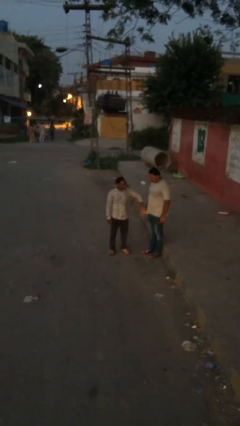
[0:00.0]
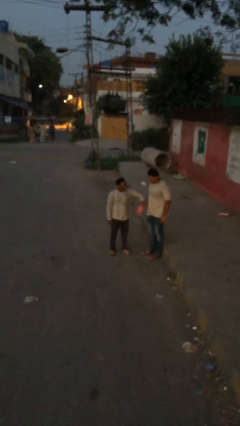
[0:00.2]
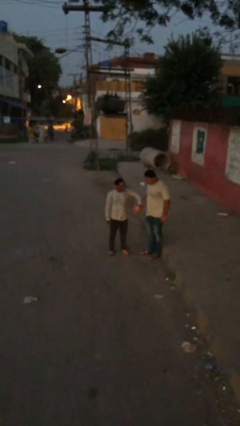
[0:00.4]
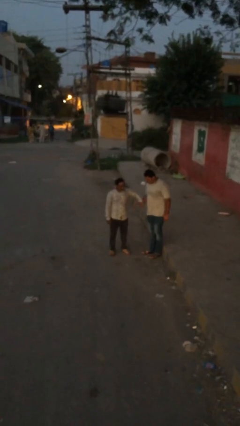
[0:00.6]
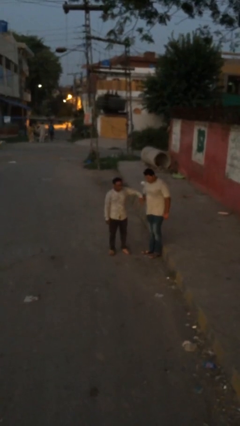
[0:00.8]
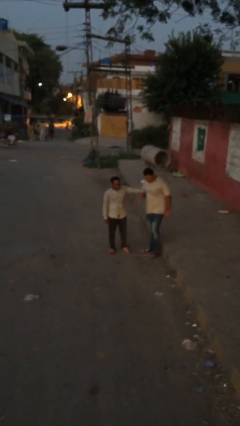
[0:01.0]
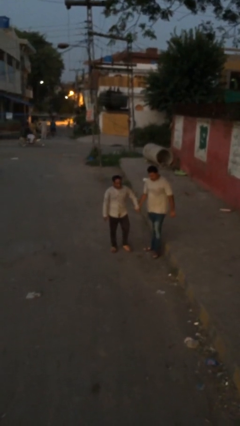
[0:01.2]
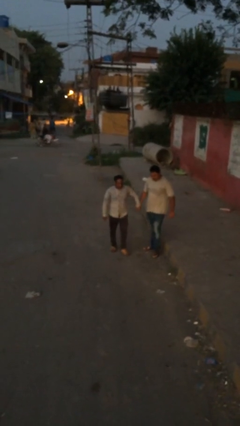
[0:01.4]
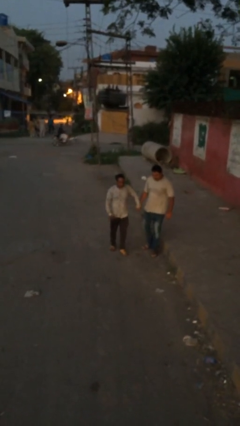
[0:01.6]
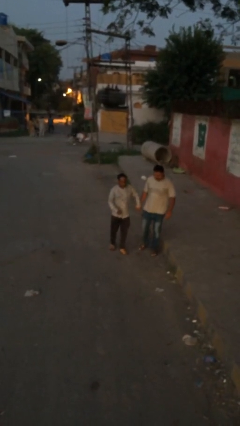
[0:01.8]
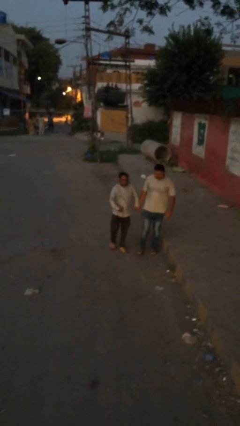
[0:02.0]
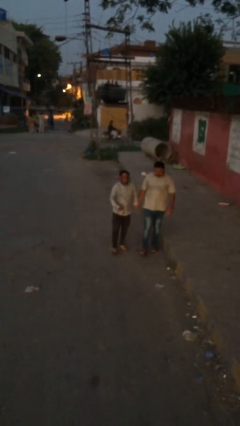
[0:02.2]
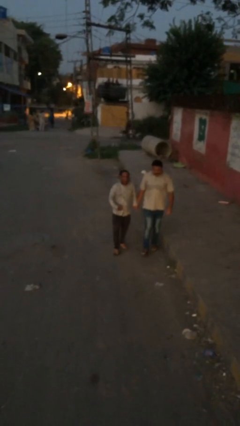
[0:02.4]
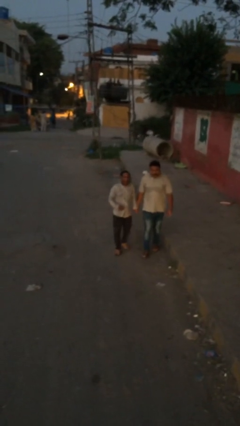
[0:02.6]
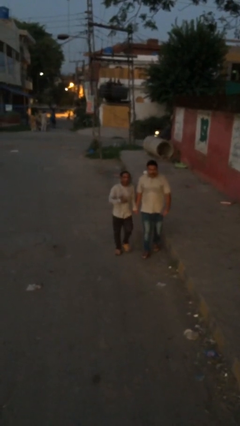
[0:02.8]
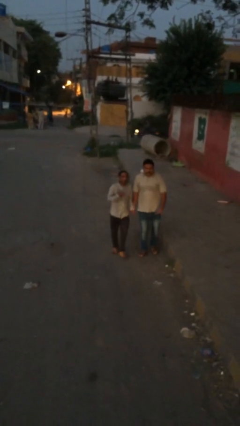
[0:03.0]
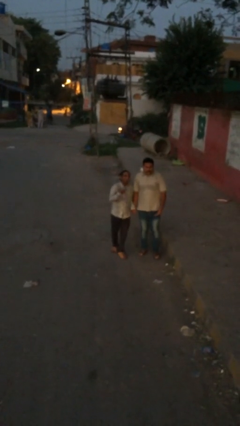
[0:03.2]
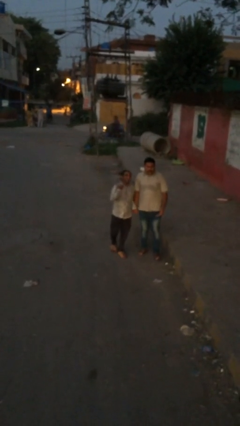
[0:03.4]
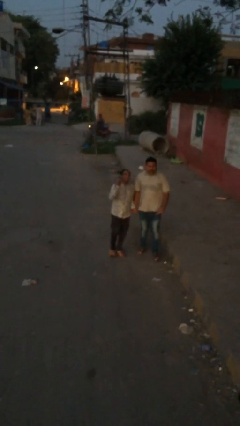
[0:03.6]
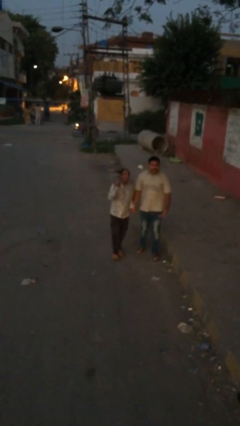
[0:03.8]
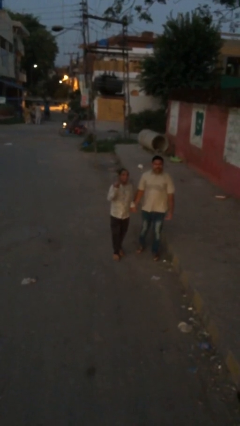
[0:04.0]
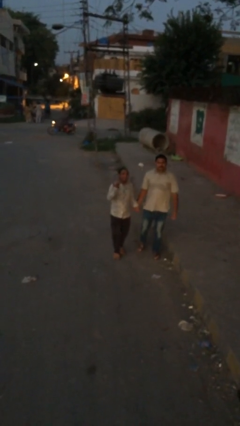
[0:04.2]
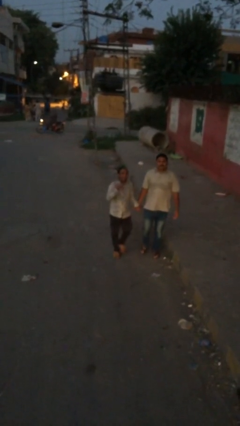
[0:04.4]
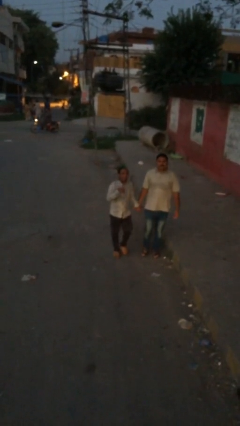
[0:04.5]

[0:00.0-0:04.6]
person holds hand

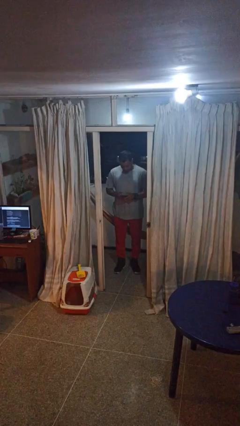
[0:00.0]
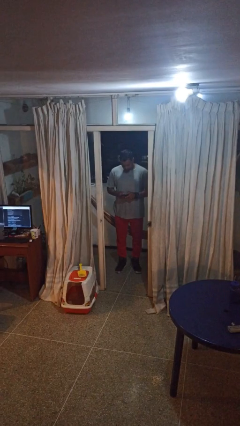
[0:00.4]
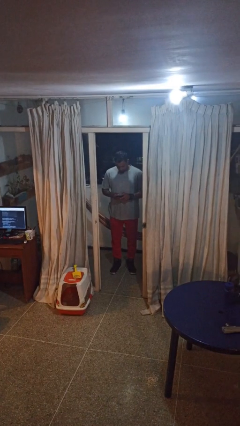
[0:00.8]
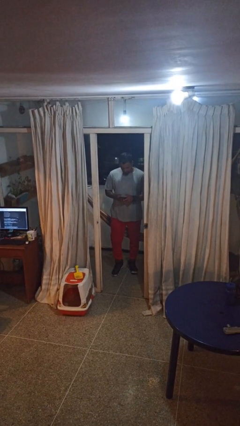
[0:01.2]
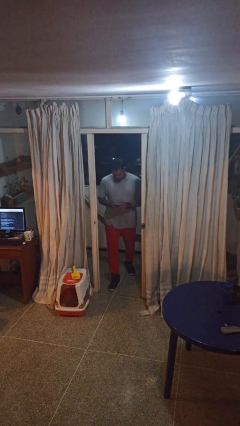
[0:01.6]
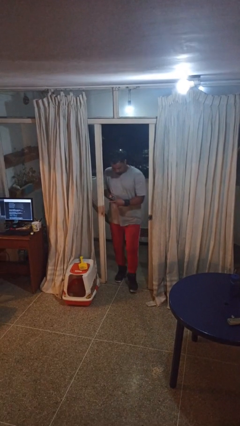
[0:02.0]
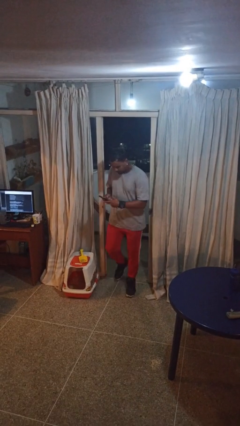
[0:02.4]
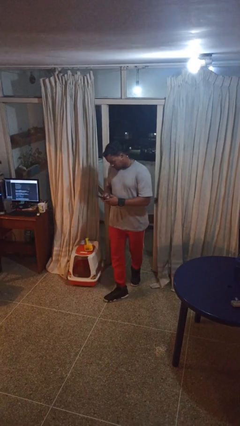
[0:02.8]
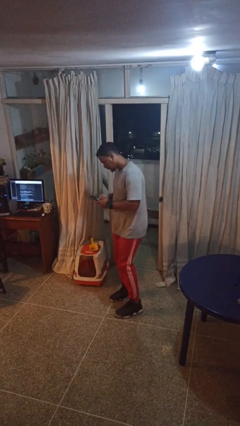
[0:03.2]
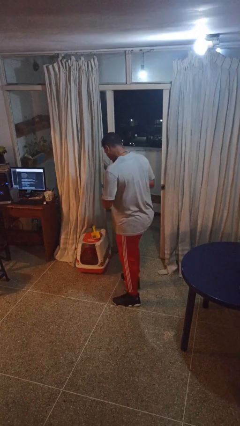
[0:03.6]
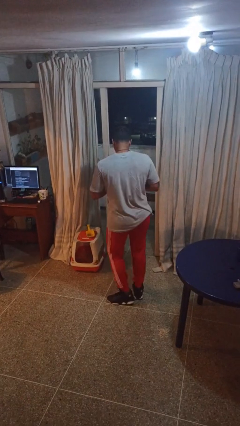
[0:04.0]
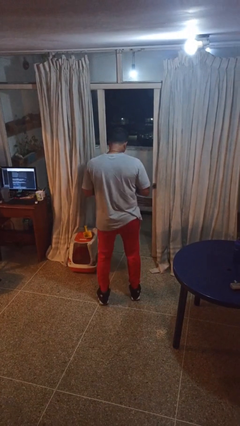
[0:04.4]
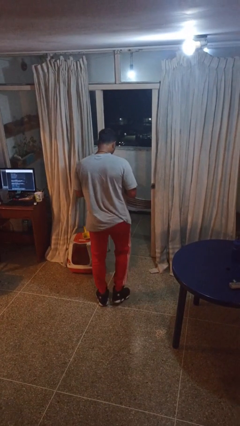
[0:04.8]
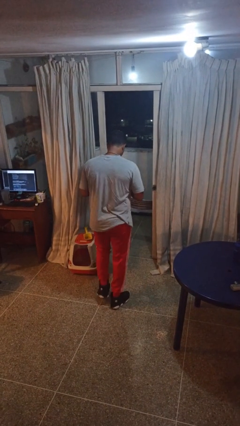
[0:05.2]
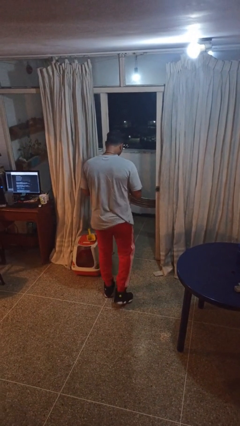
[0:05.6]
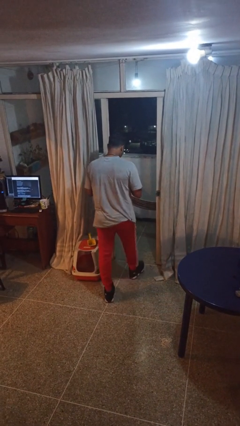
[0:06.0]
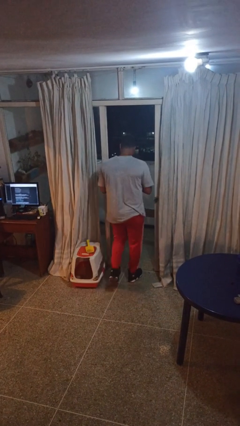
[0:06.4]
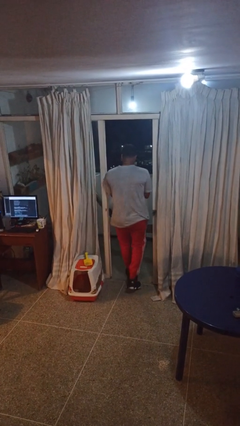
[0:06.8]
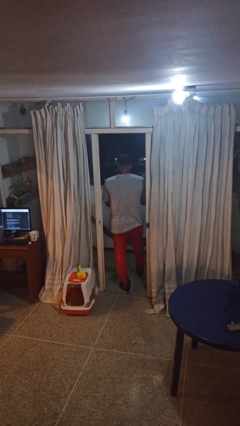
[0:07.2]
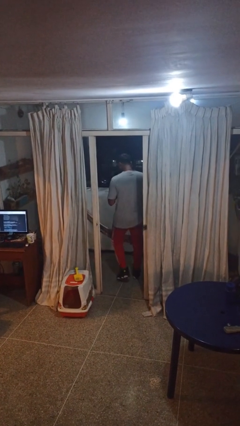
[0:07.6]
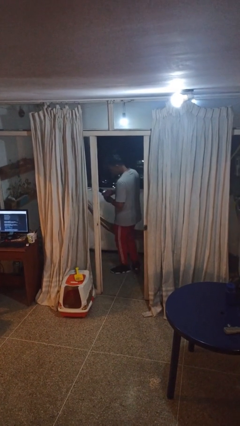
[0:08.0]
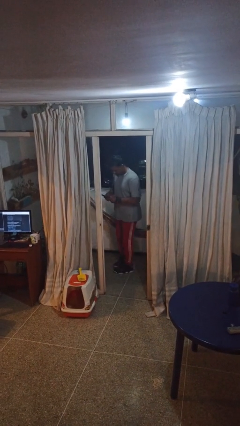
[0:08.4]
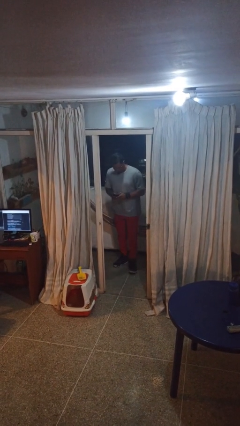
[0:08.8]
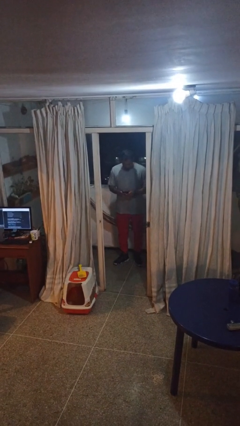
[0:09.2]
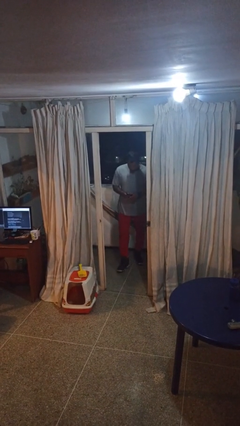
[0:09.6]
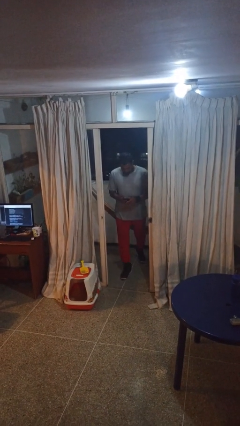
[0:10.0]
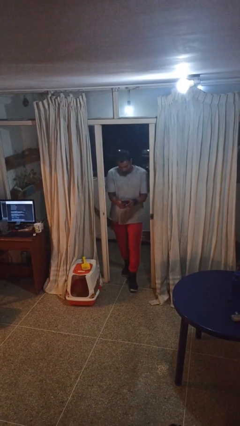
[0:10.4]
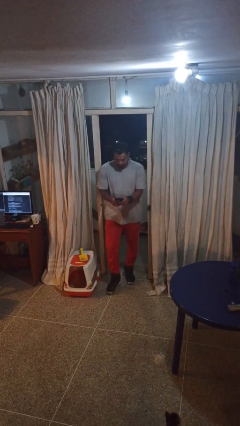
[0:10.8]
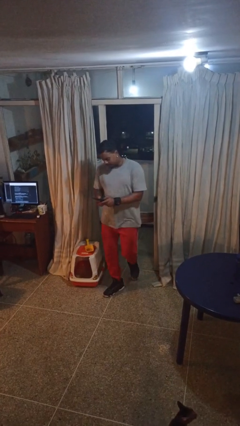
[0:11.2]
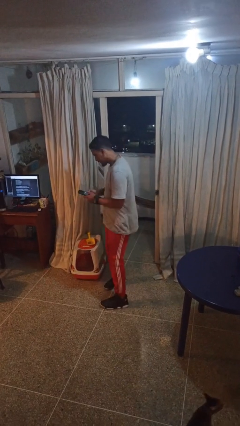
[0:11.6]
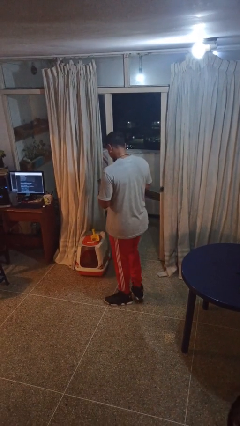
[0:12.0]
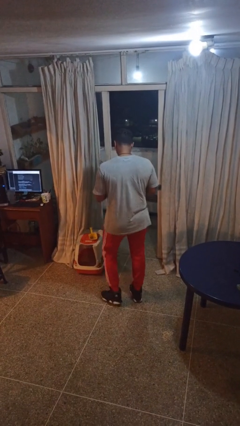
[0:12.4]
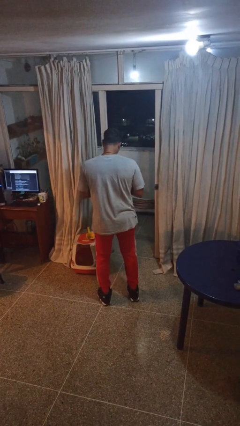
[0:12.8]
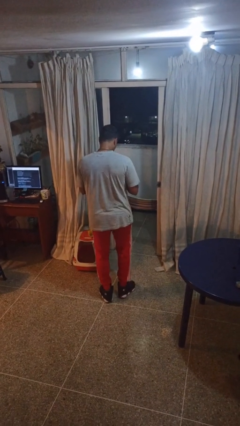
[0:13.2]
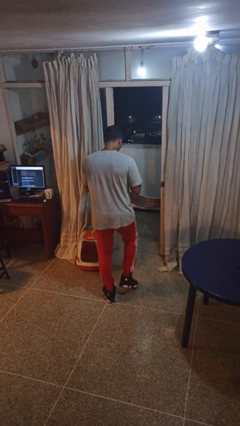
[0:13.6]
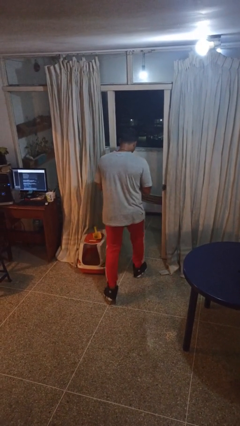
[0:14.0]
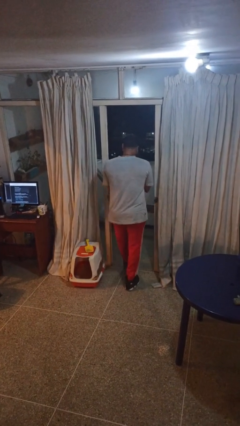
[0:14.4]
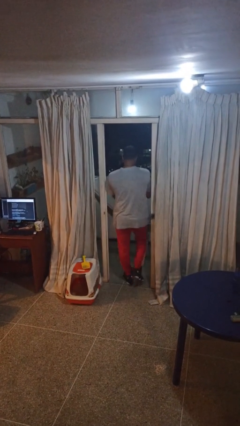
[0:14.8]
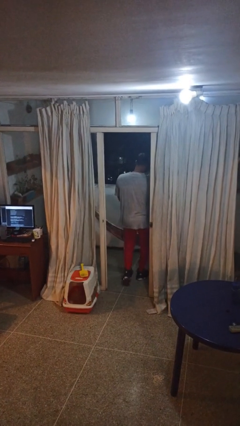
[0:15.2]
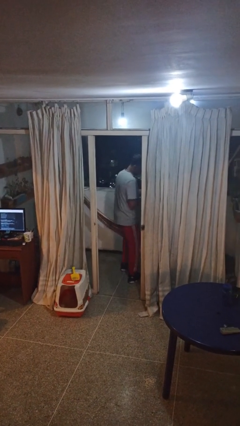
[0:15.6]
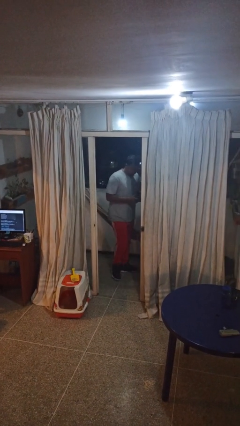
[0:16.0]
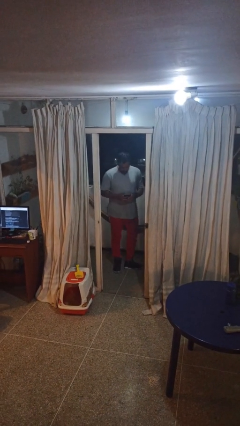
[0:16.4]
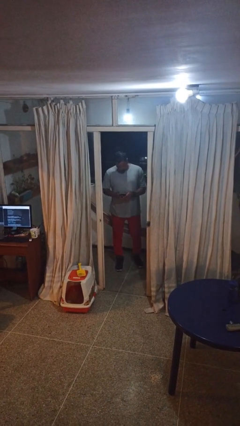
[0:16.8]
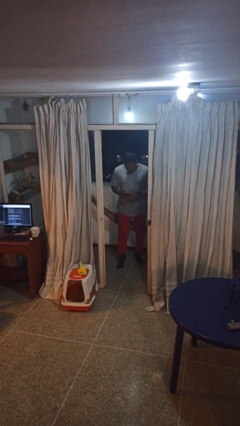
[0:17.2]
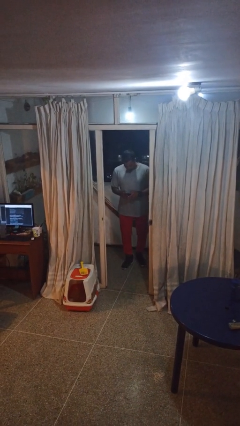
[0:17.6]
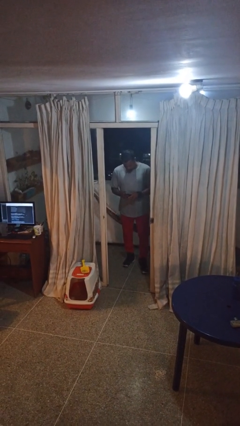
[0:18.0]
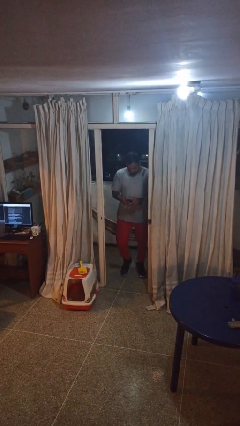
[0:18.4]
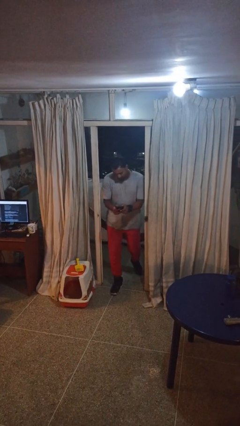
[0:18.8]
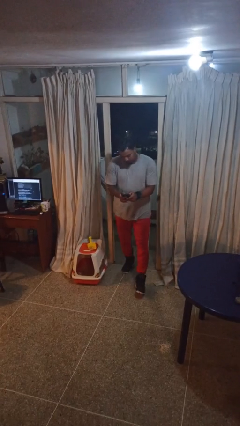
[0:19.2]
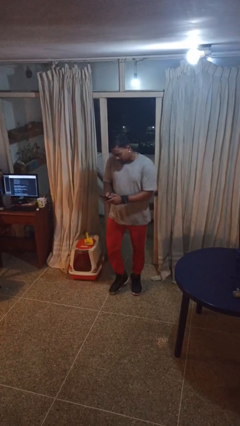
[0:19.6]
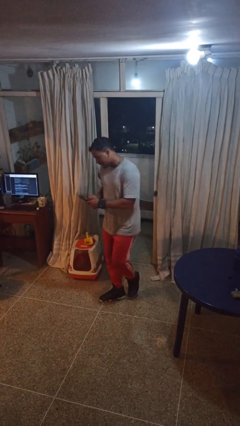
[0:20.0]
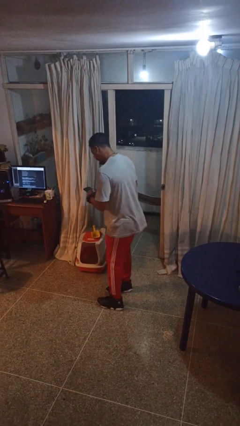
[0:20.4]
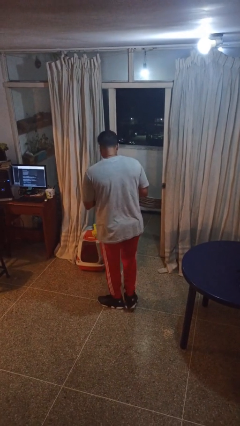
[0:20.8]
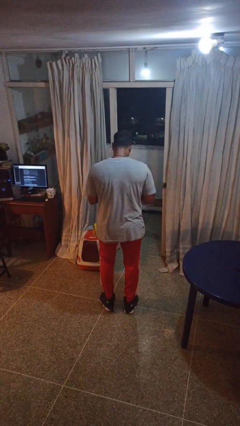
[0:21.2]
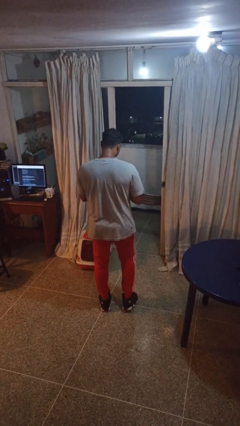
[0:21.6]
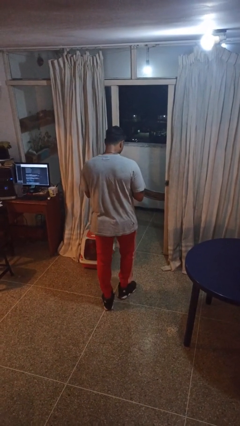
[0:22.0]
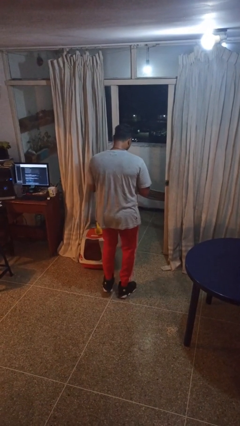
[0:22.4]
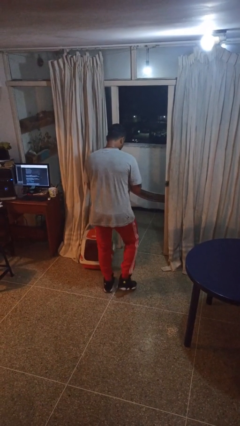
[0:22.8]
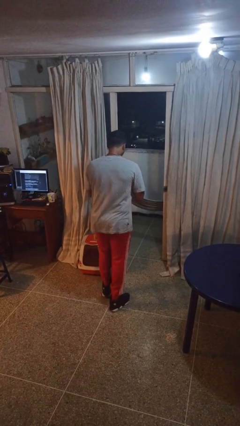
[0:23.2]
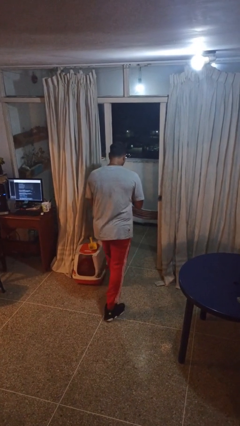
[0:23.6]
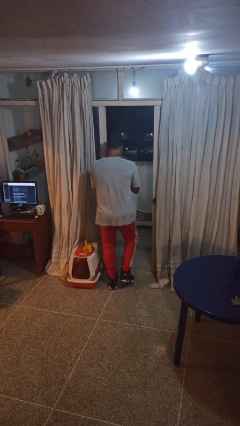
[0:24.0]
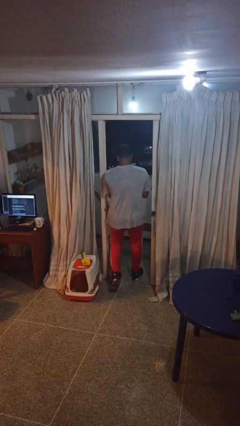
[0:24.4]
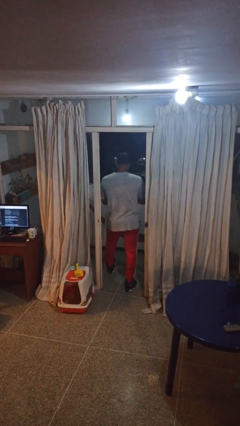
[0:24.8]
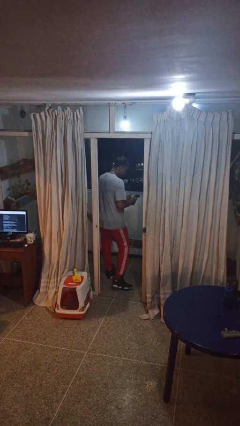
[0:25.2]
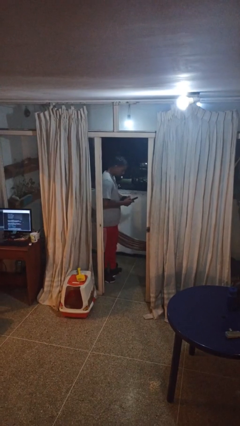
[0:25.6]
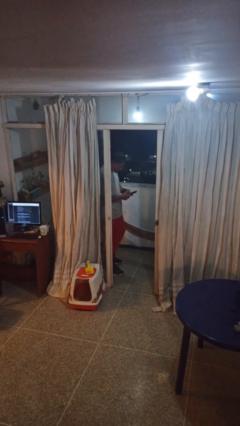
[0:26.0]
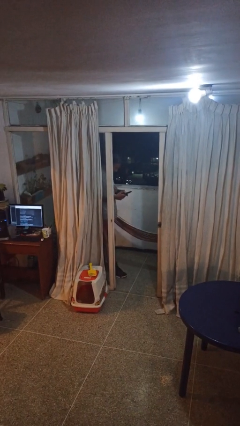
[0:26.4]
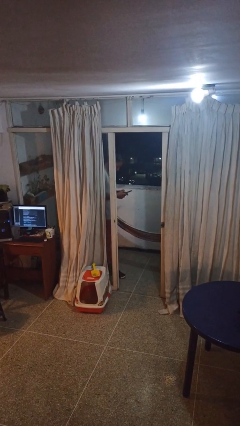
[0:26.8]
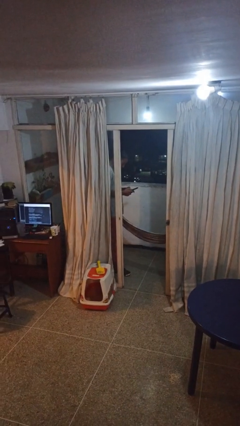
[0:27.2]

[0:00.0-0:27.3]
person texts on phone

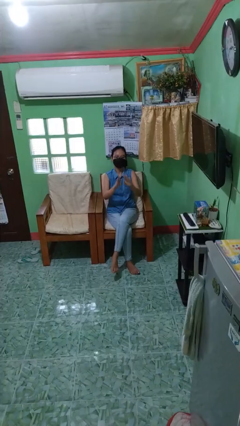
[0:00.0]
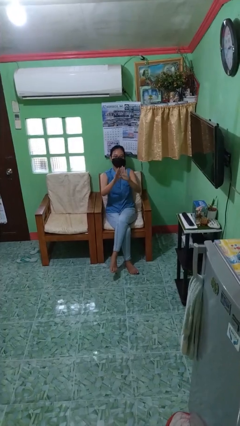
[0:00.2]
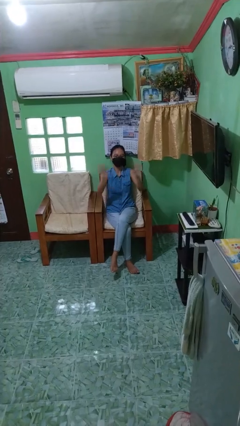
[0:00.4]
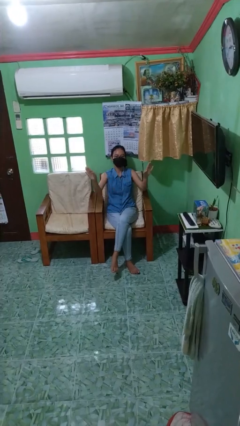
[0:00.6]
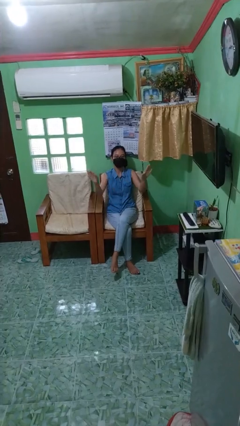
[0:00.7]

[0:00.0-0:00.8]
person gestures zoom in
